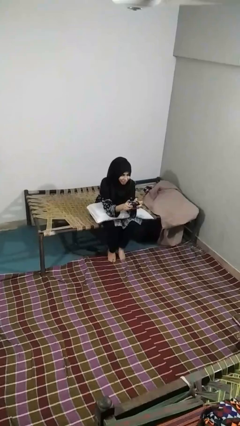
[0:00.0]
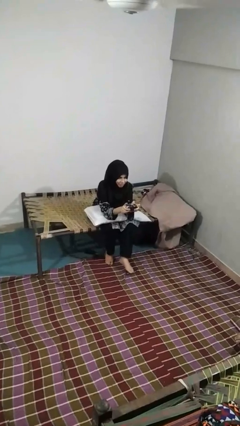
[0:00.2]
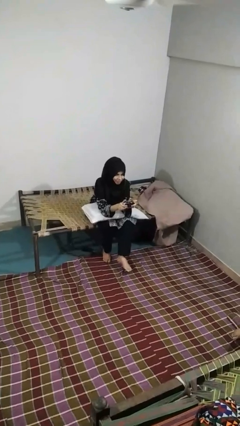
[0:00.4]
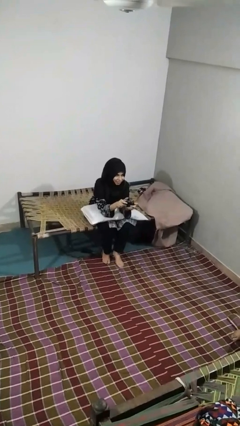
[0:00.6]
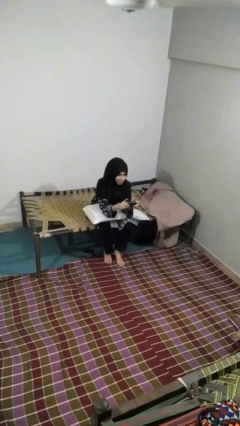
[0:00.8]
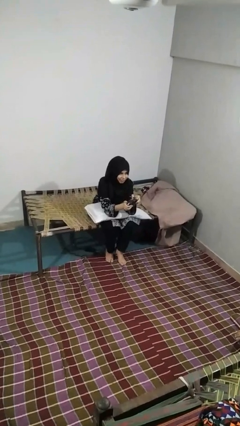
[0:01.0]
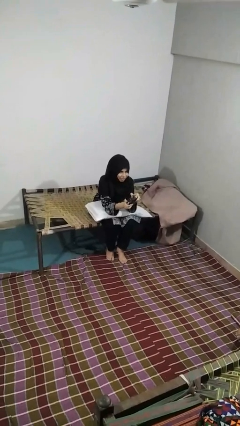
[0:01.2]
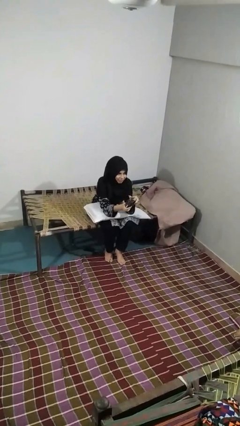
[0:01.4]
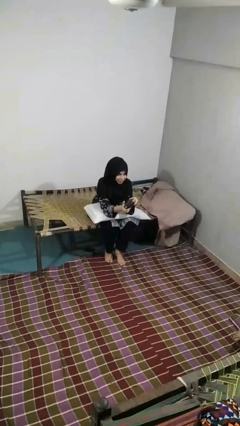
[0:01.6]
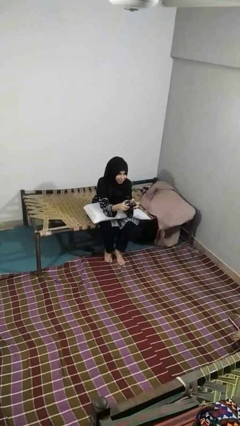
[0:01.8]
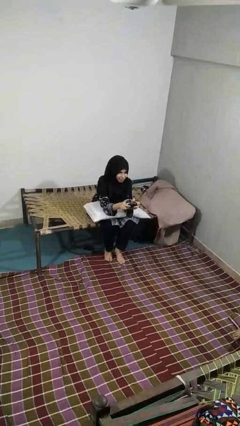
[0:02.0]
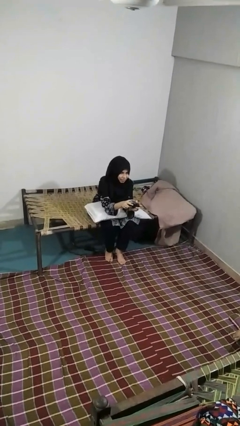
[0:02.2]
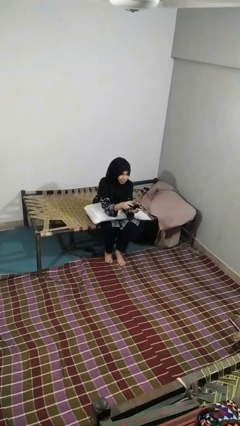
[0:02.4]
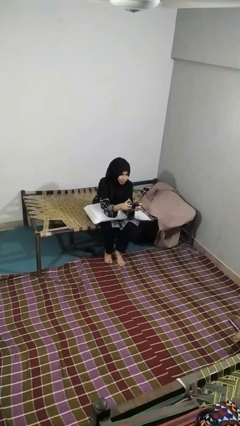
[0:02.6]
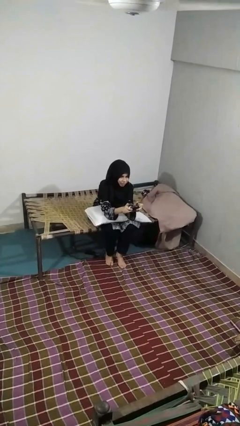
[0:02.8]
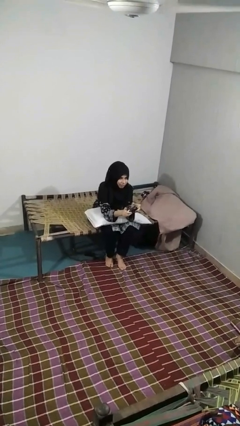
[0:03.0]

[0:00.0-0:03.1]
person interacts with handheld game

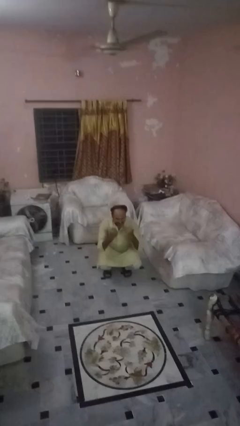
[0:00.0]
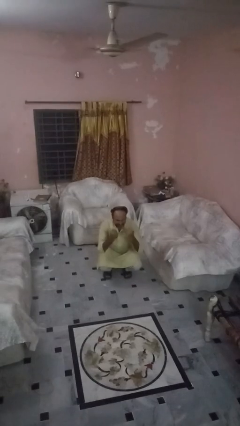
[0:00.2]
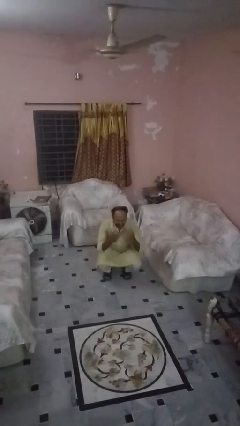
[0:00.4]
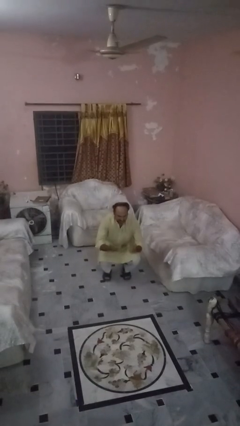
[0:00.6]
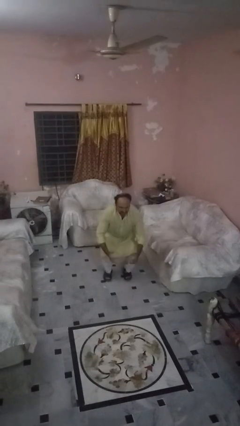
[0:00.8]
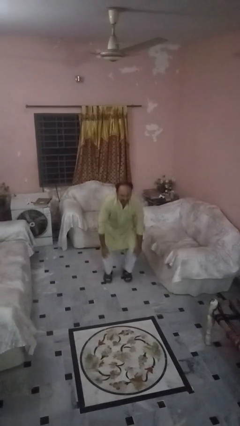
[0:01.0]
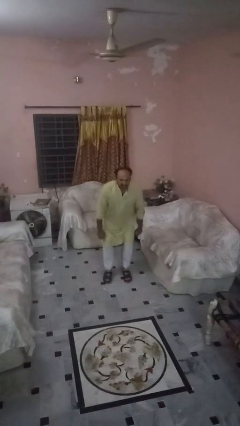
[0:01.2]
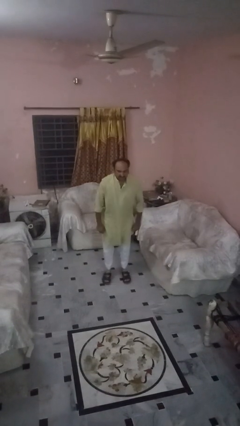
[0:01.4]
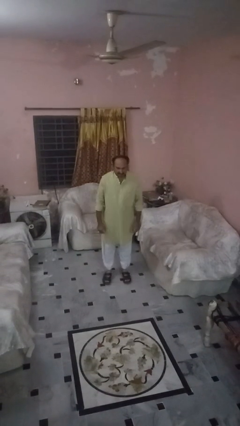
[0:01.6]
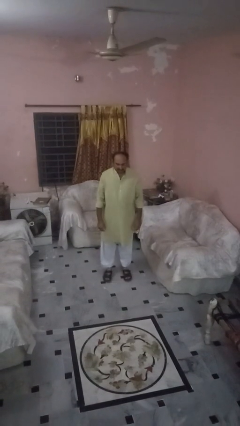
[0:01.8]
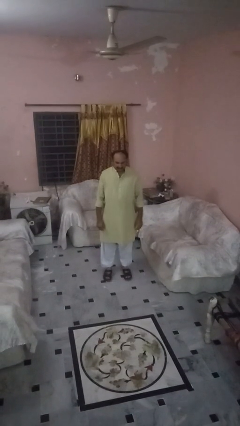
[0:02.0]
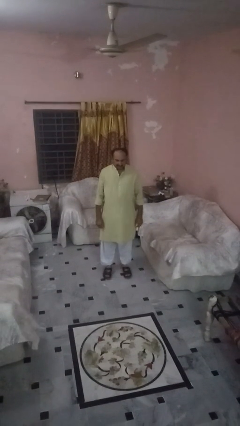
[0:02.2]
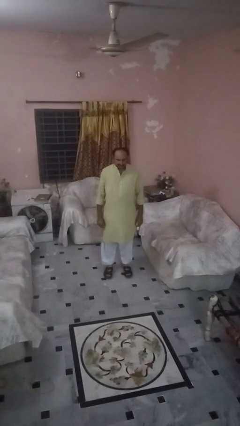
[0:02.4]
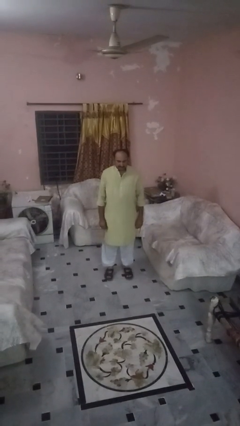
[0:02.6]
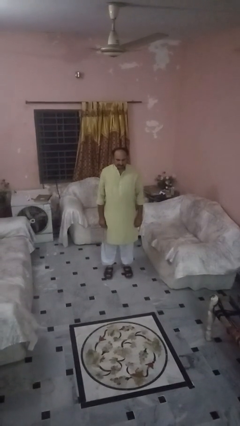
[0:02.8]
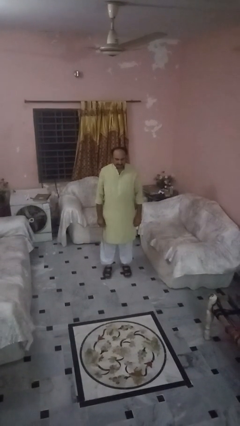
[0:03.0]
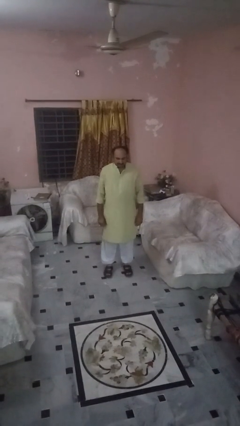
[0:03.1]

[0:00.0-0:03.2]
person stands up

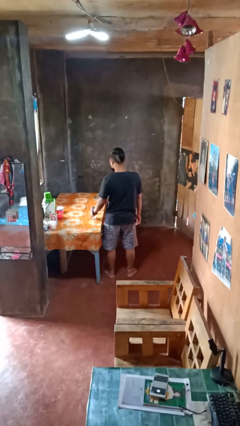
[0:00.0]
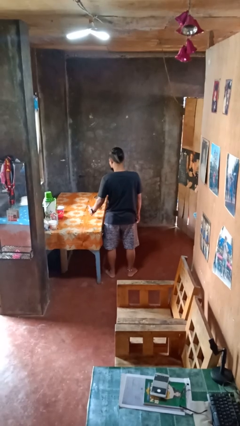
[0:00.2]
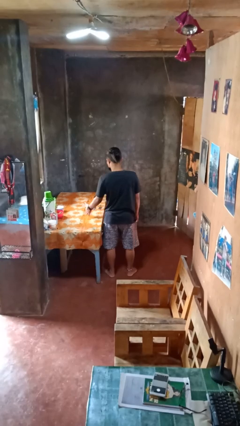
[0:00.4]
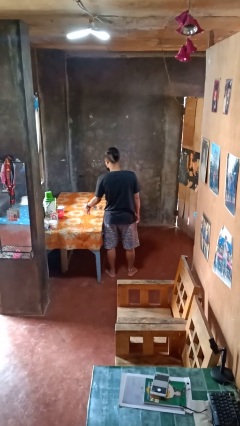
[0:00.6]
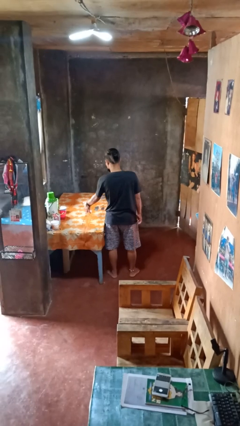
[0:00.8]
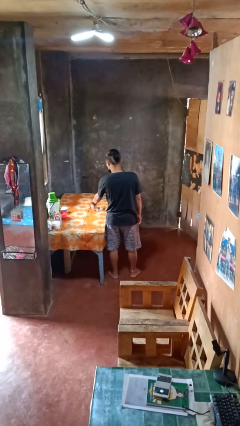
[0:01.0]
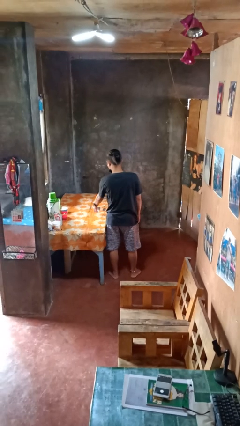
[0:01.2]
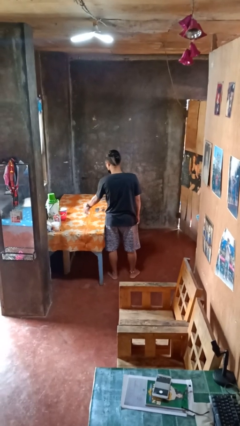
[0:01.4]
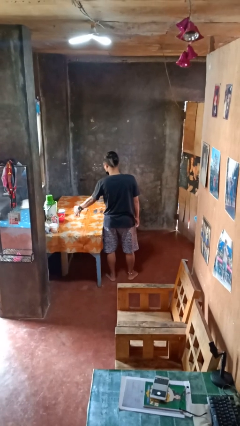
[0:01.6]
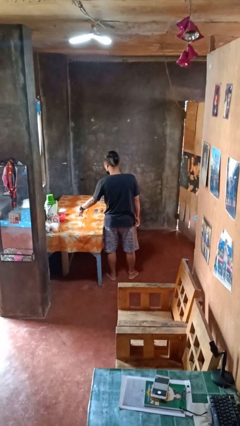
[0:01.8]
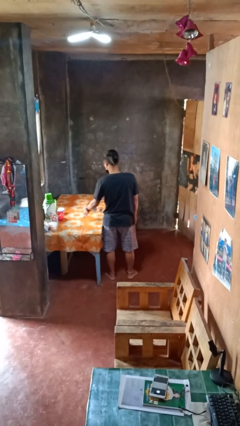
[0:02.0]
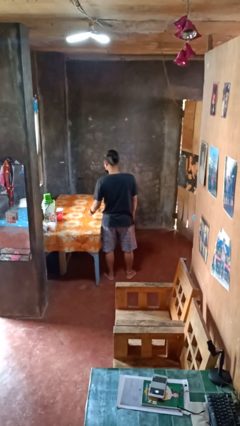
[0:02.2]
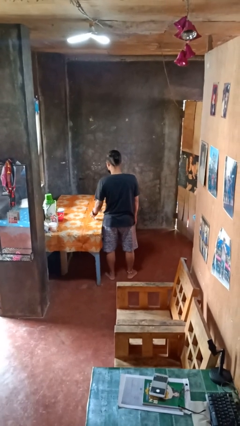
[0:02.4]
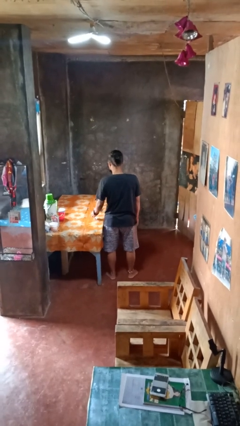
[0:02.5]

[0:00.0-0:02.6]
person sprays from bottle

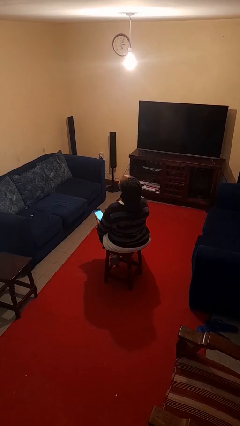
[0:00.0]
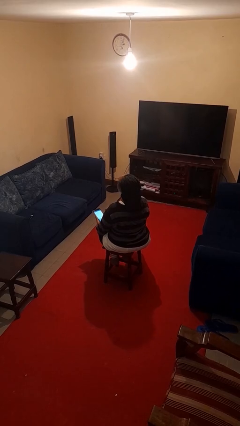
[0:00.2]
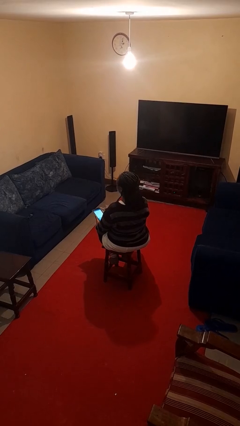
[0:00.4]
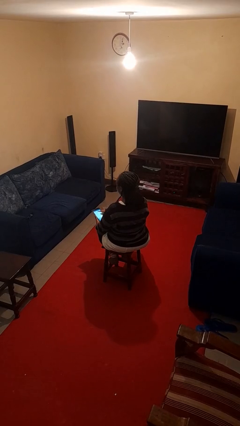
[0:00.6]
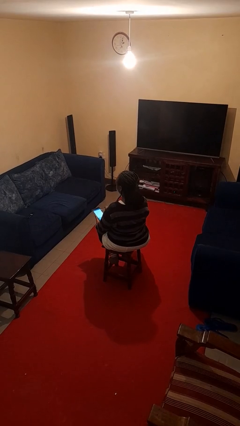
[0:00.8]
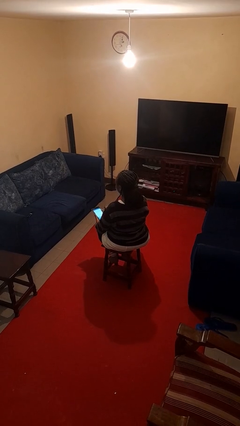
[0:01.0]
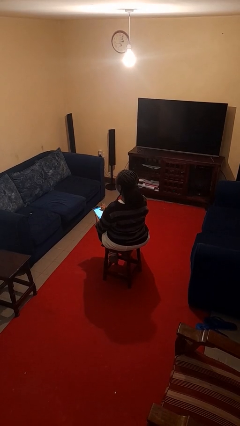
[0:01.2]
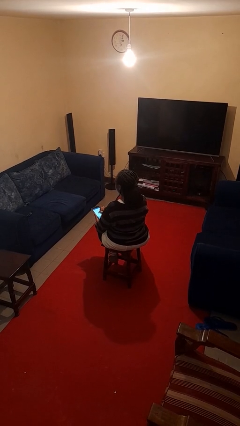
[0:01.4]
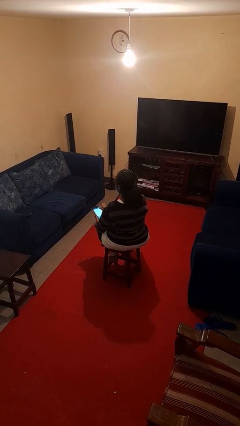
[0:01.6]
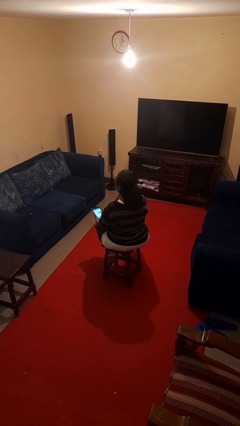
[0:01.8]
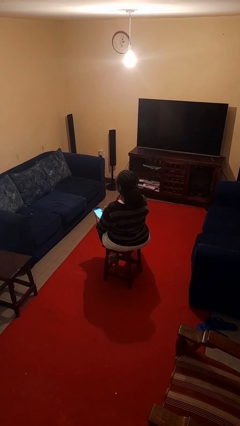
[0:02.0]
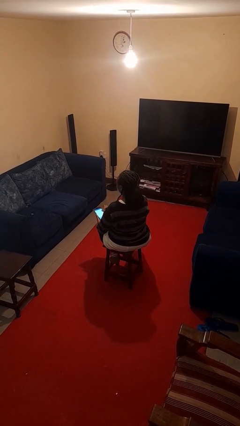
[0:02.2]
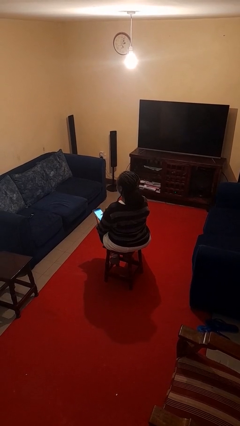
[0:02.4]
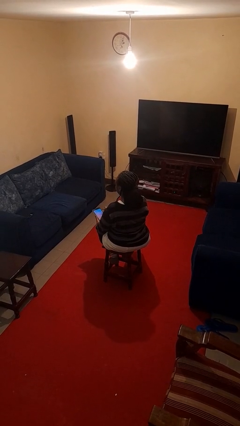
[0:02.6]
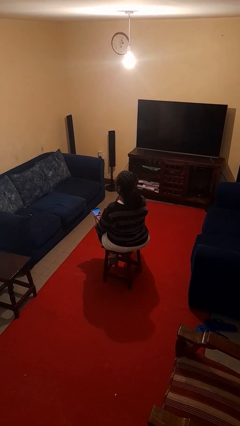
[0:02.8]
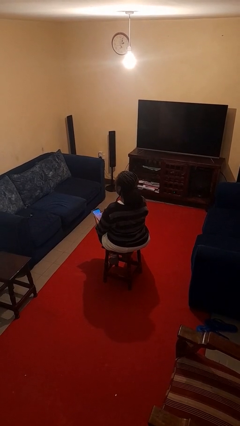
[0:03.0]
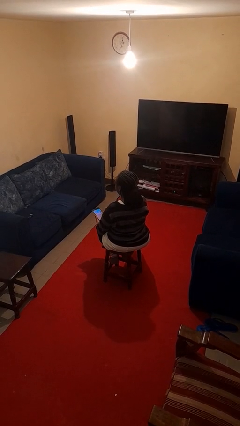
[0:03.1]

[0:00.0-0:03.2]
person interacts with tablet

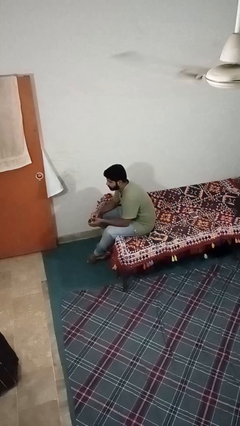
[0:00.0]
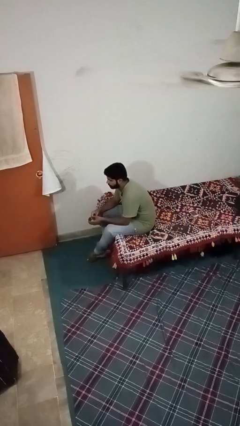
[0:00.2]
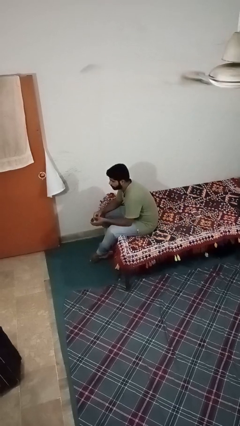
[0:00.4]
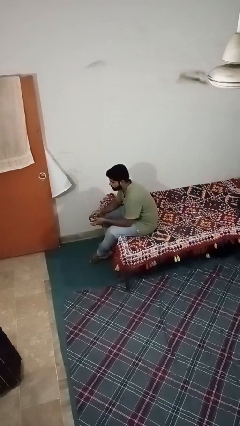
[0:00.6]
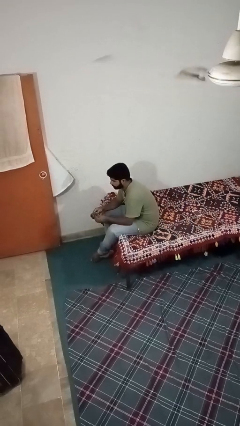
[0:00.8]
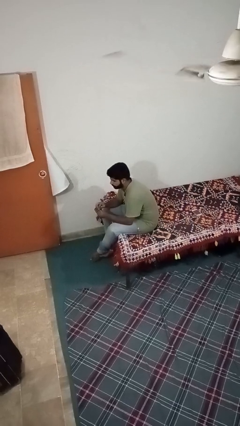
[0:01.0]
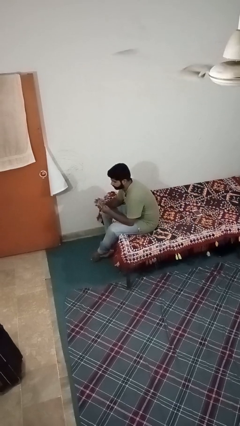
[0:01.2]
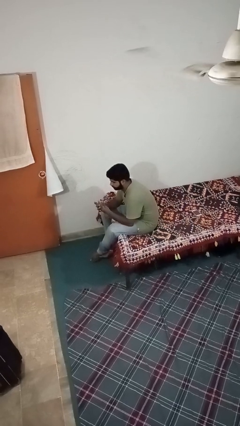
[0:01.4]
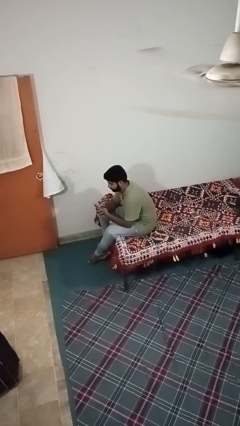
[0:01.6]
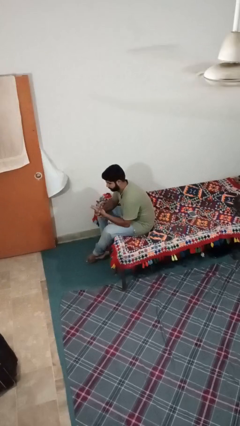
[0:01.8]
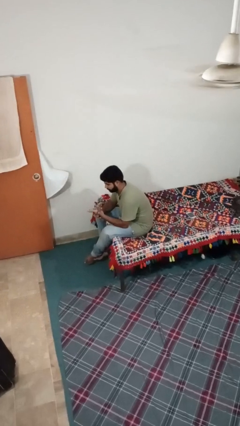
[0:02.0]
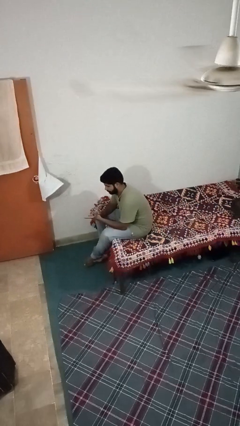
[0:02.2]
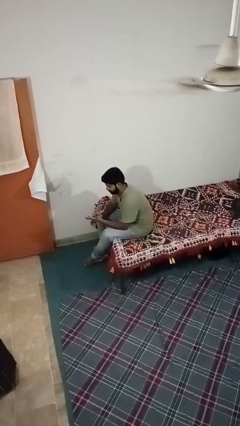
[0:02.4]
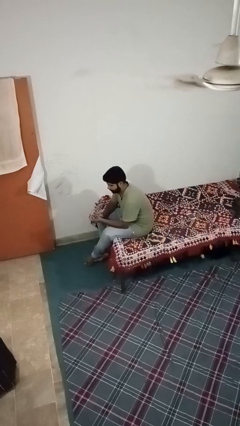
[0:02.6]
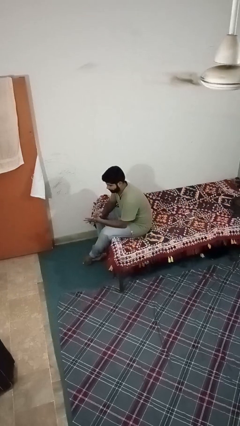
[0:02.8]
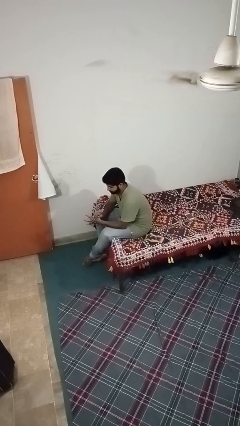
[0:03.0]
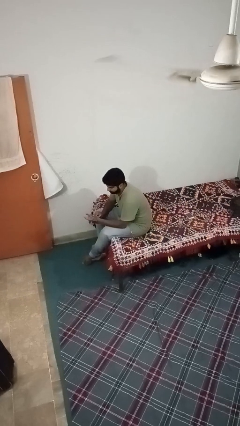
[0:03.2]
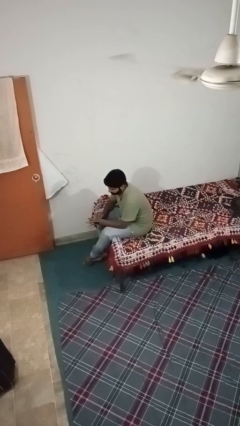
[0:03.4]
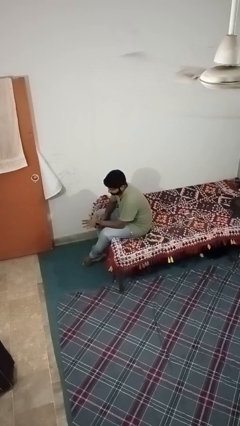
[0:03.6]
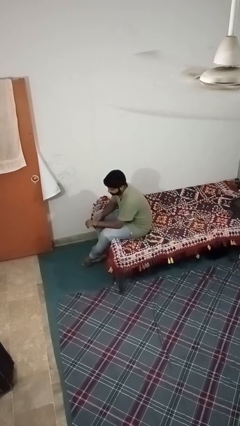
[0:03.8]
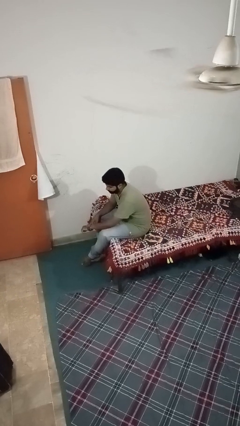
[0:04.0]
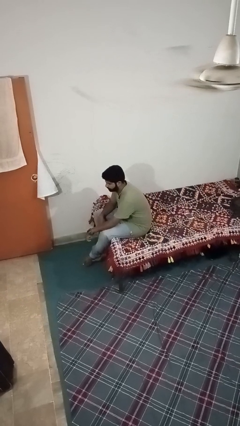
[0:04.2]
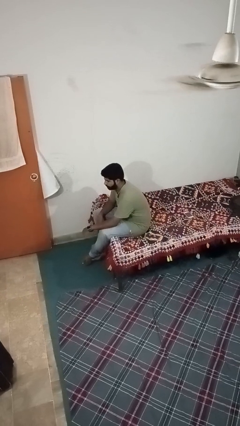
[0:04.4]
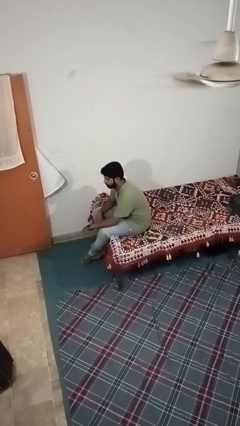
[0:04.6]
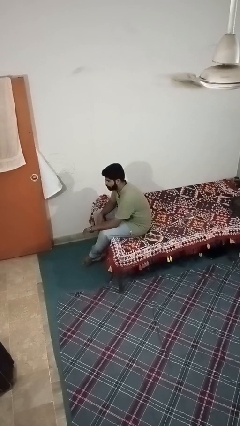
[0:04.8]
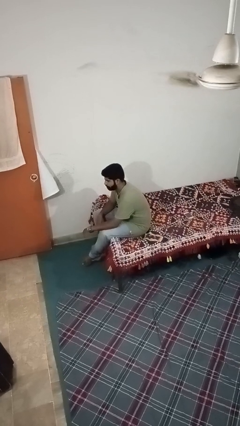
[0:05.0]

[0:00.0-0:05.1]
person puts on wristwatch

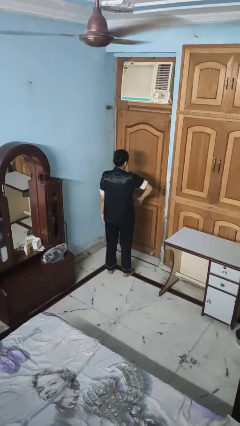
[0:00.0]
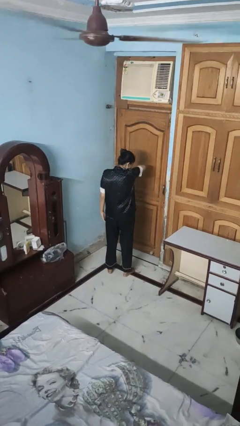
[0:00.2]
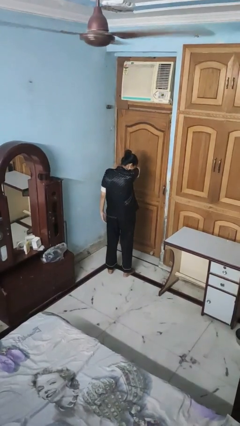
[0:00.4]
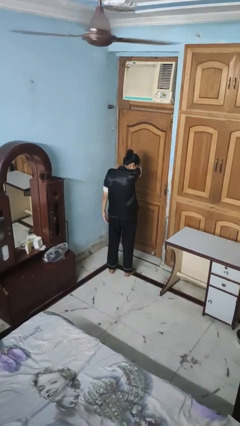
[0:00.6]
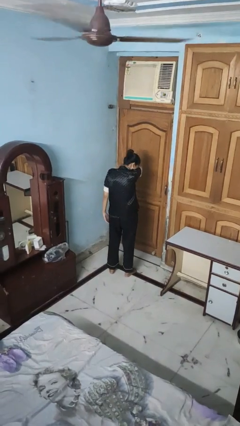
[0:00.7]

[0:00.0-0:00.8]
person sneezes into arm
